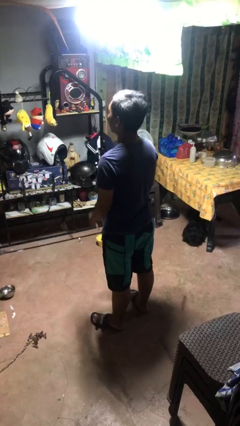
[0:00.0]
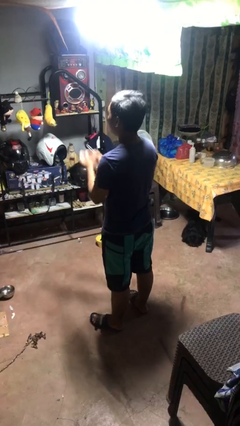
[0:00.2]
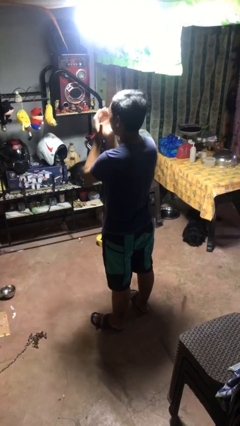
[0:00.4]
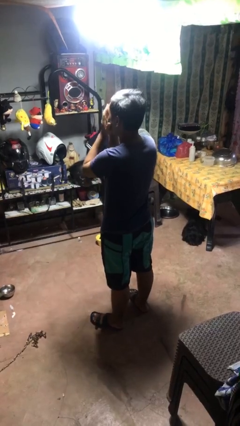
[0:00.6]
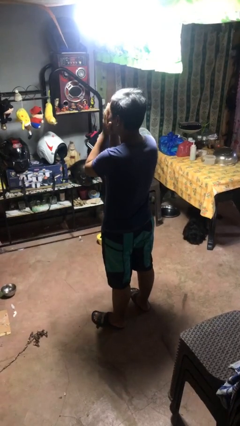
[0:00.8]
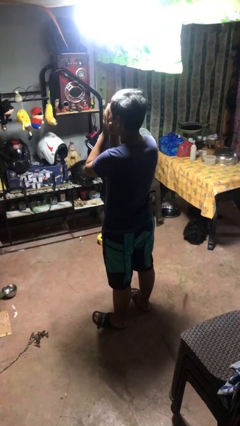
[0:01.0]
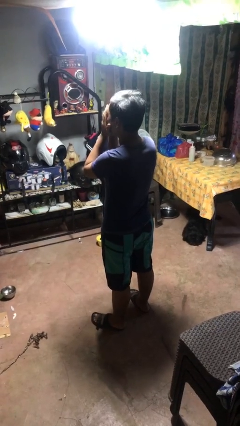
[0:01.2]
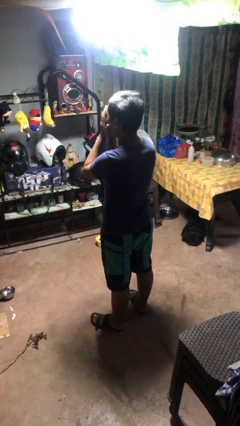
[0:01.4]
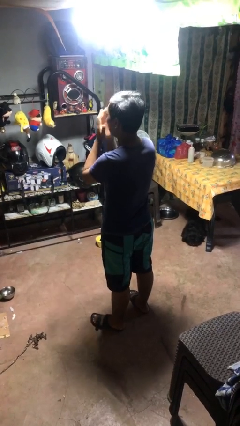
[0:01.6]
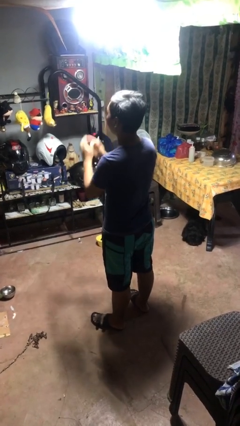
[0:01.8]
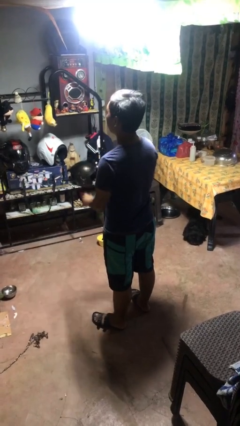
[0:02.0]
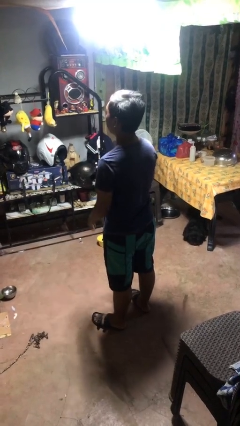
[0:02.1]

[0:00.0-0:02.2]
person covers face with hands

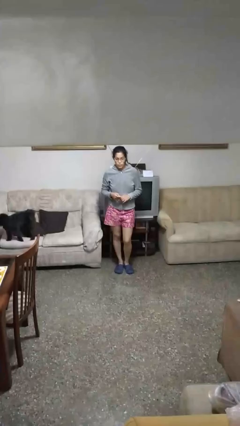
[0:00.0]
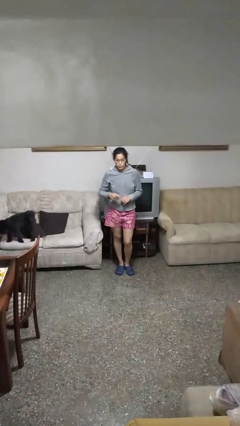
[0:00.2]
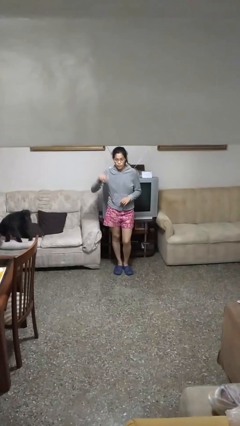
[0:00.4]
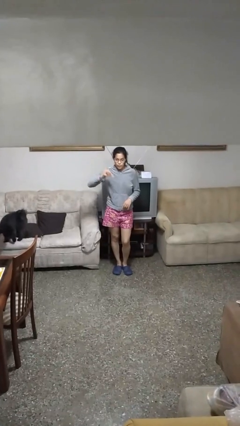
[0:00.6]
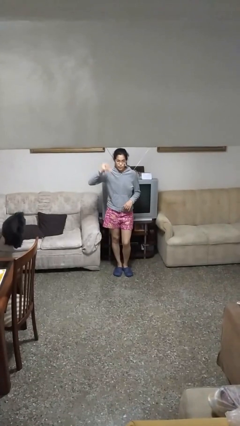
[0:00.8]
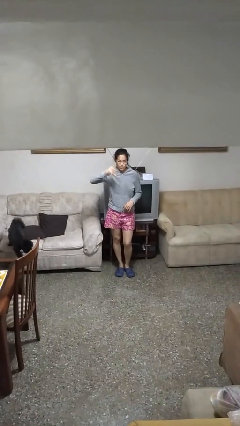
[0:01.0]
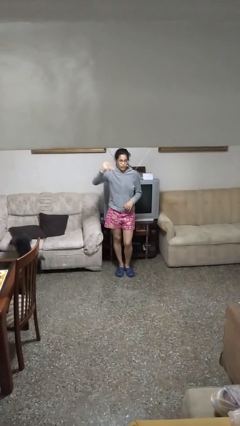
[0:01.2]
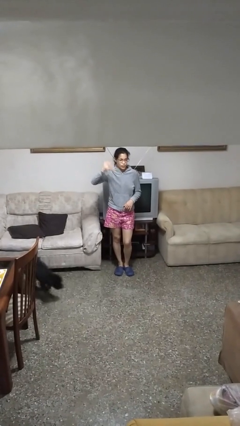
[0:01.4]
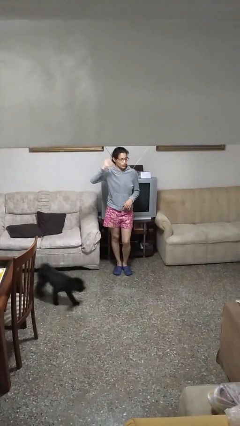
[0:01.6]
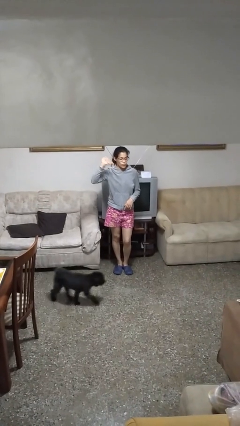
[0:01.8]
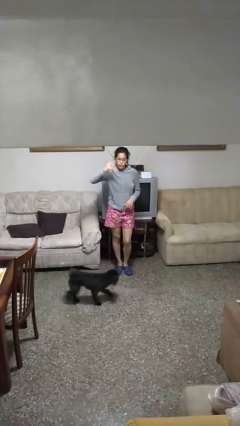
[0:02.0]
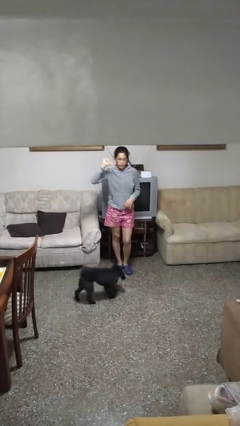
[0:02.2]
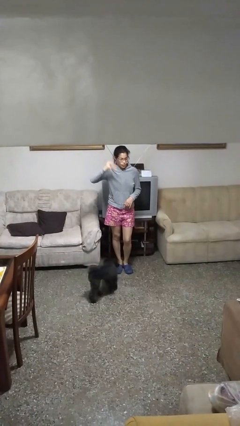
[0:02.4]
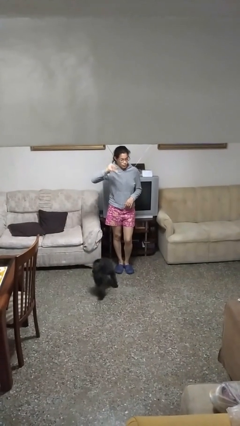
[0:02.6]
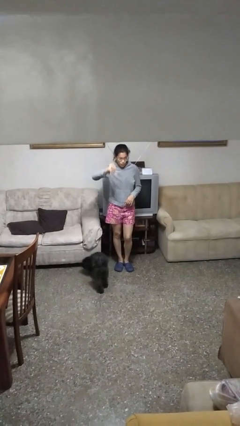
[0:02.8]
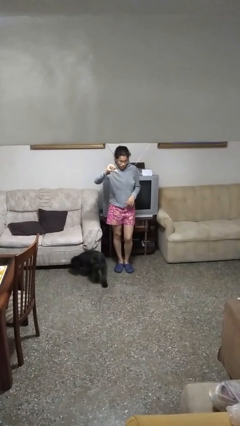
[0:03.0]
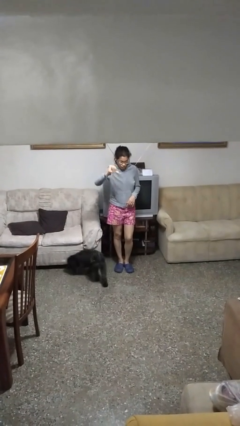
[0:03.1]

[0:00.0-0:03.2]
person gestures thumbs down

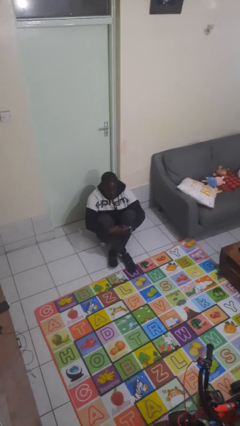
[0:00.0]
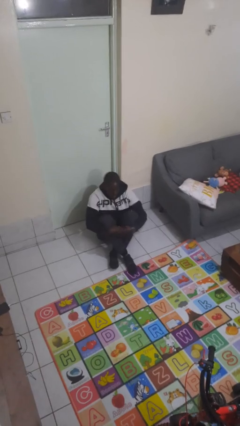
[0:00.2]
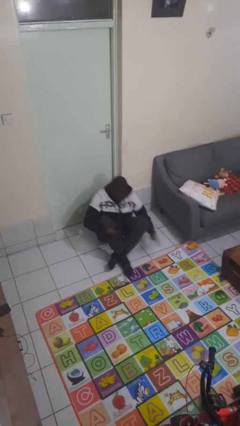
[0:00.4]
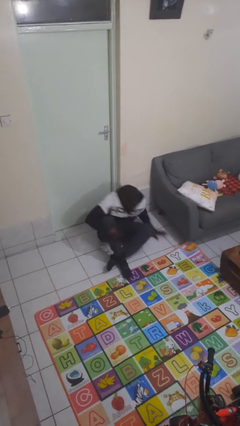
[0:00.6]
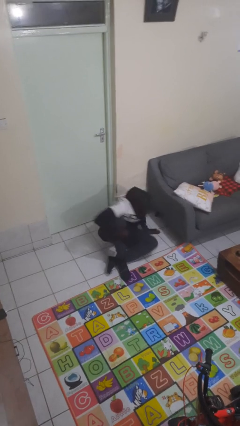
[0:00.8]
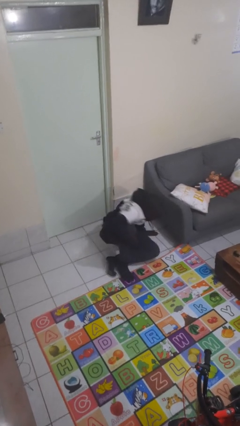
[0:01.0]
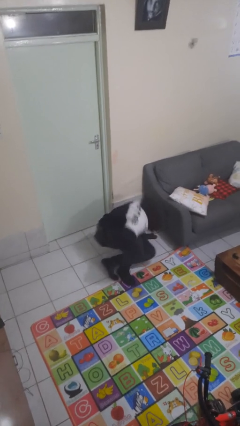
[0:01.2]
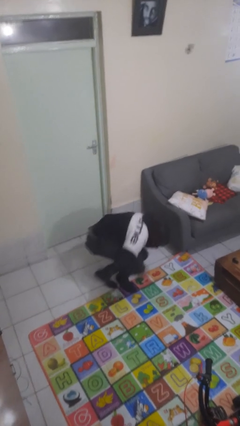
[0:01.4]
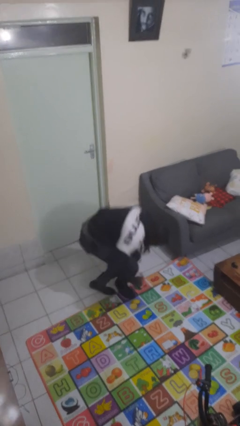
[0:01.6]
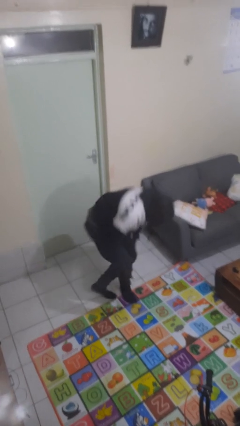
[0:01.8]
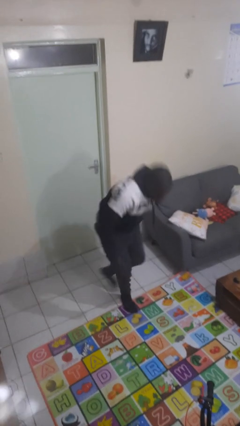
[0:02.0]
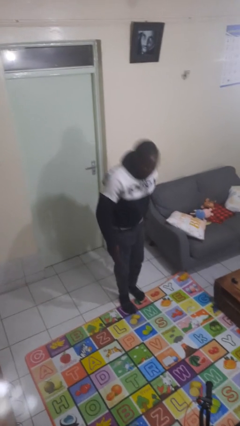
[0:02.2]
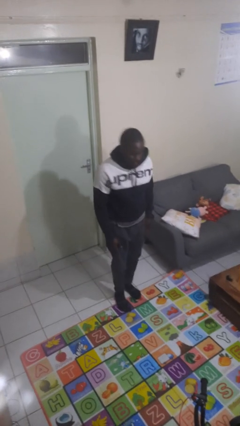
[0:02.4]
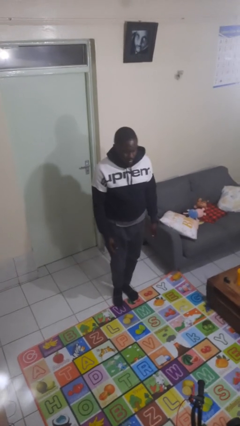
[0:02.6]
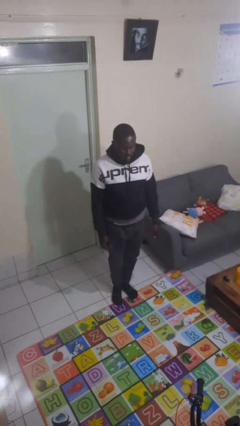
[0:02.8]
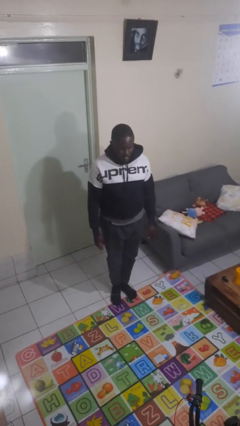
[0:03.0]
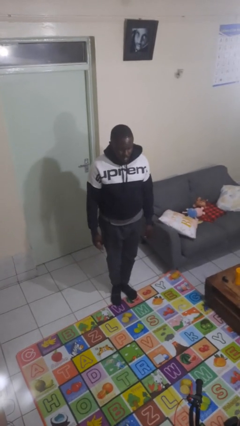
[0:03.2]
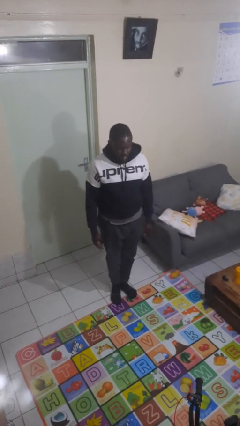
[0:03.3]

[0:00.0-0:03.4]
person stands up from floor

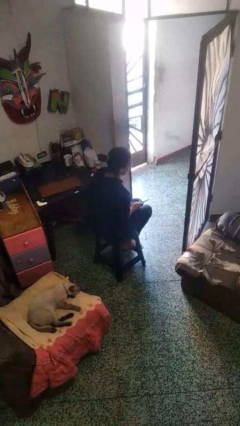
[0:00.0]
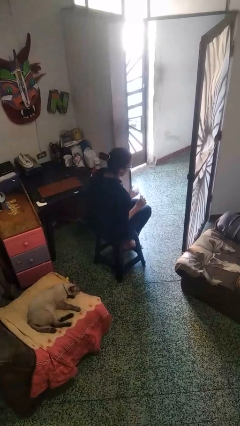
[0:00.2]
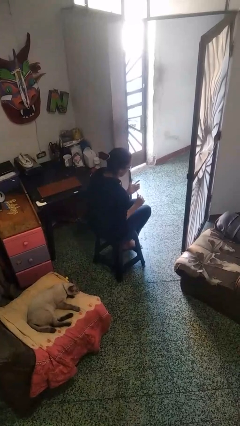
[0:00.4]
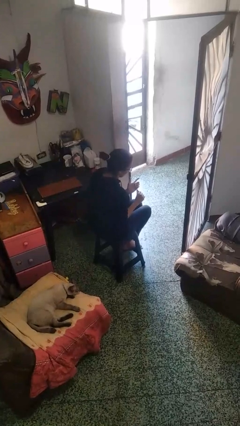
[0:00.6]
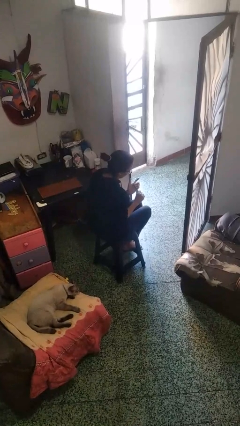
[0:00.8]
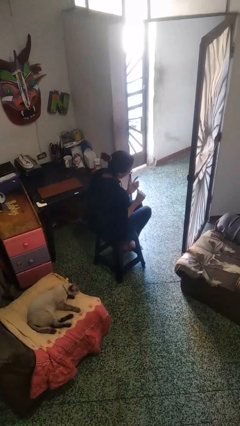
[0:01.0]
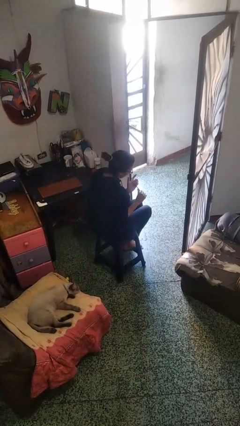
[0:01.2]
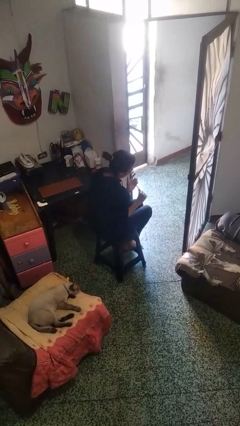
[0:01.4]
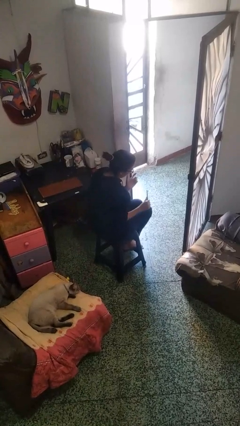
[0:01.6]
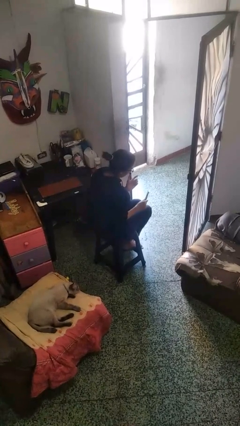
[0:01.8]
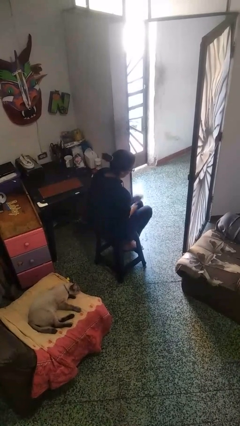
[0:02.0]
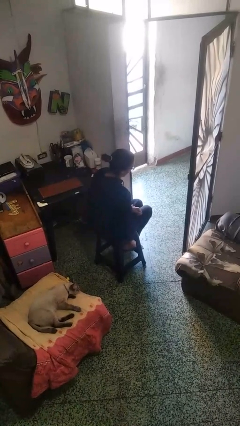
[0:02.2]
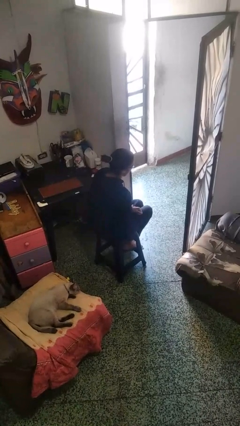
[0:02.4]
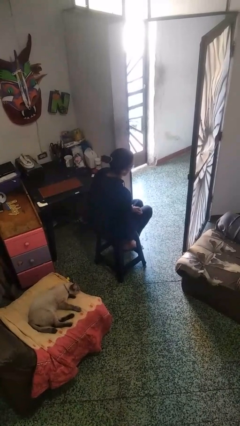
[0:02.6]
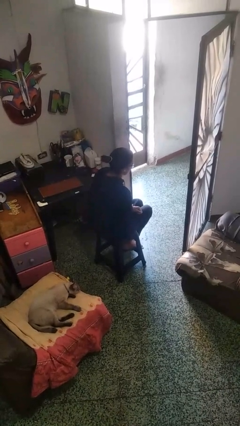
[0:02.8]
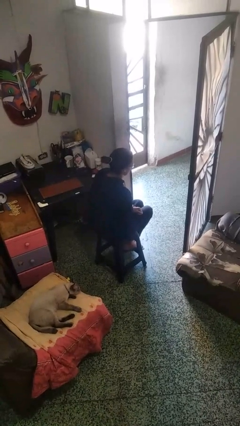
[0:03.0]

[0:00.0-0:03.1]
person files fingernails

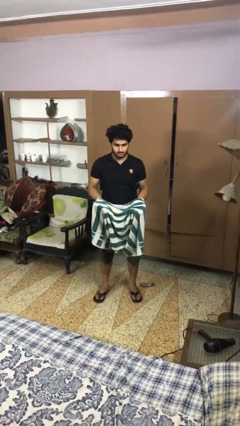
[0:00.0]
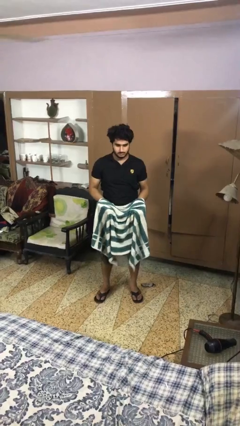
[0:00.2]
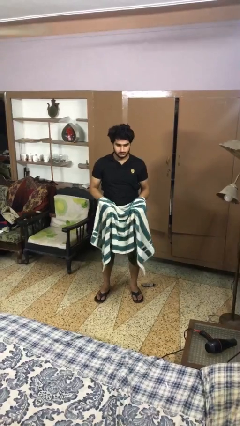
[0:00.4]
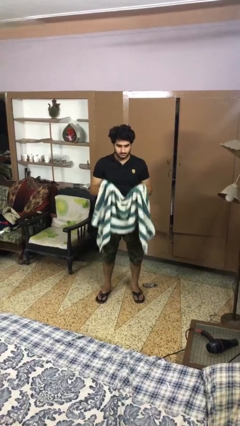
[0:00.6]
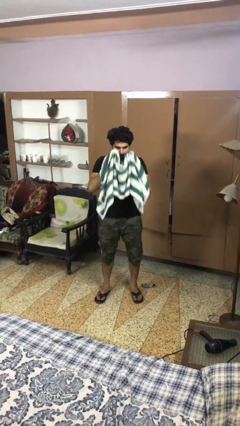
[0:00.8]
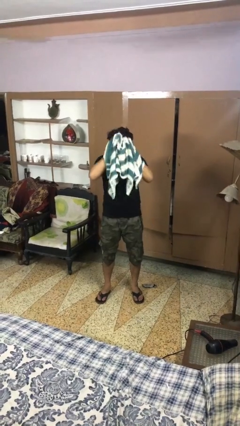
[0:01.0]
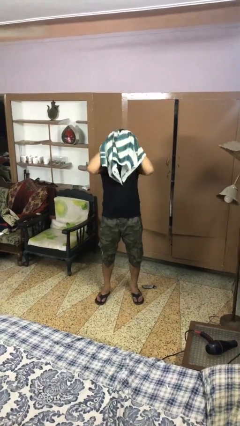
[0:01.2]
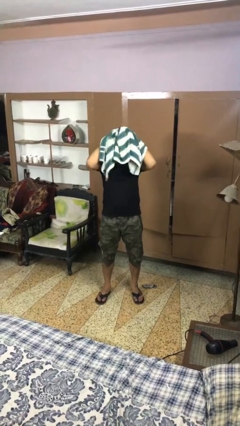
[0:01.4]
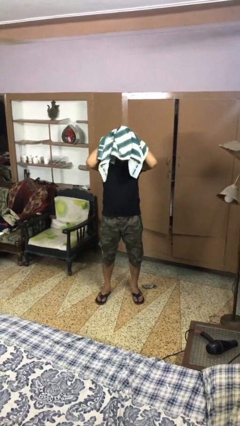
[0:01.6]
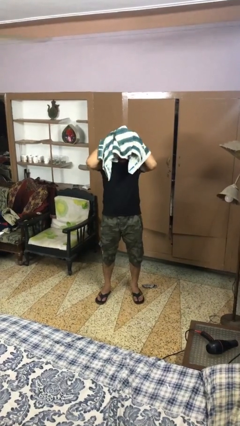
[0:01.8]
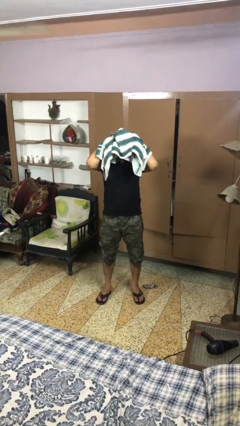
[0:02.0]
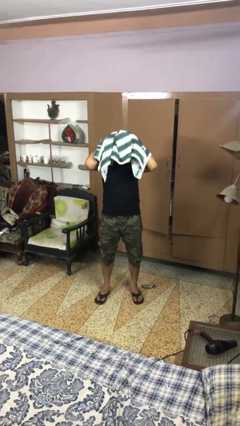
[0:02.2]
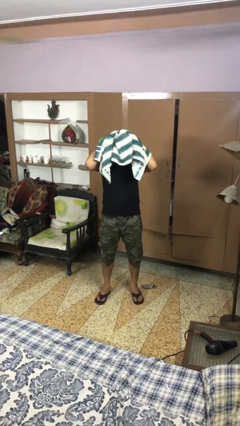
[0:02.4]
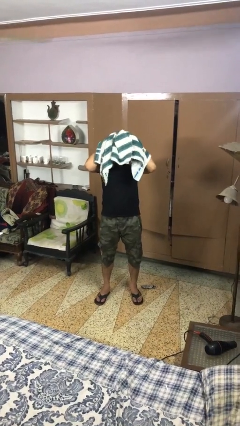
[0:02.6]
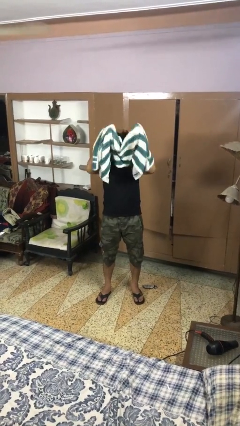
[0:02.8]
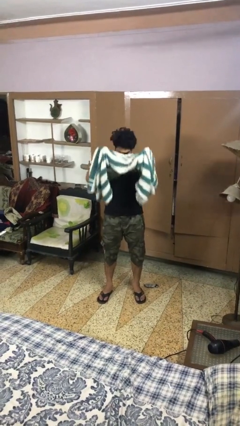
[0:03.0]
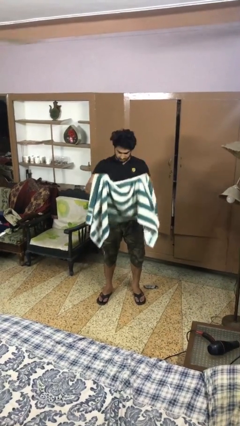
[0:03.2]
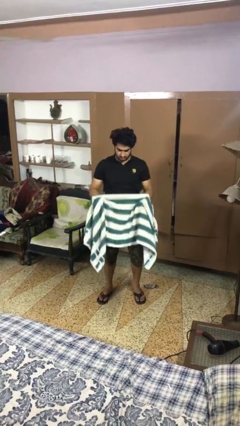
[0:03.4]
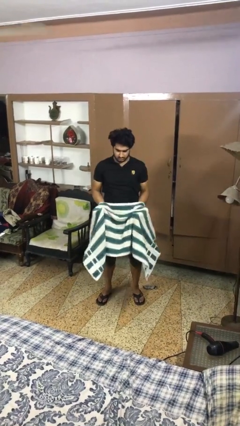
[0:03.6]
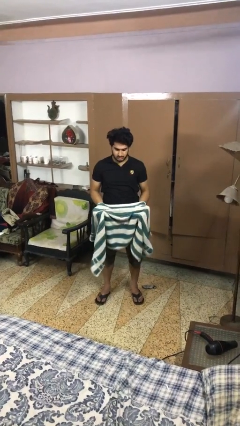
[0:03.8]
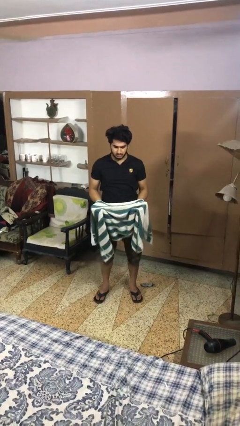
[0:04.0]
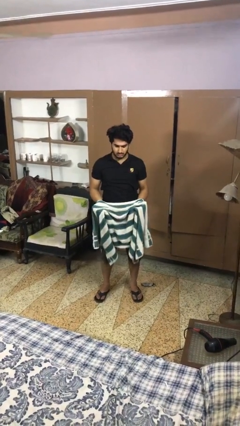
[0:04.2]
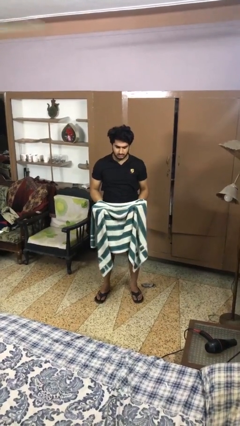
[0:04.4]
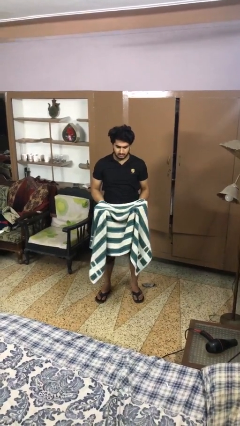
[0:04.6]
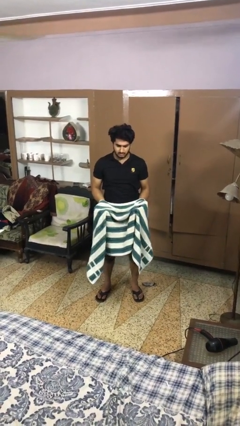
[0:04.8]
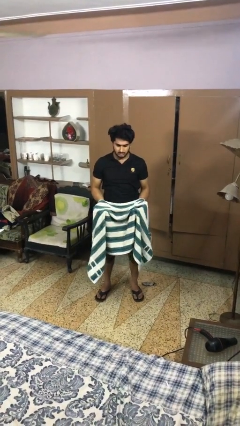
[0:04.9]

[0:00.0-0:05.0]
person dries hair with towel

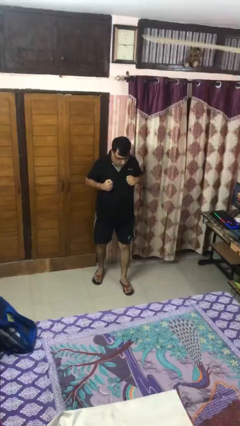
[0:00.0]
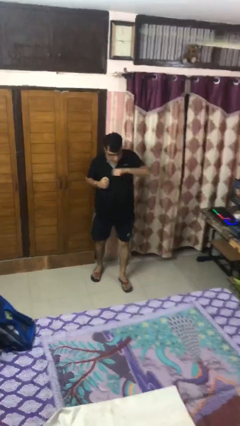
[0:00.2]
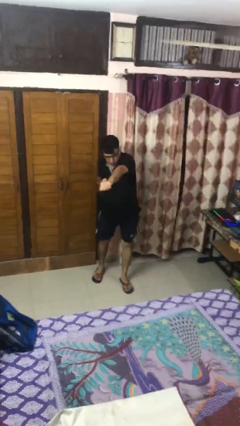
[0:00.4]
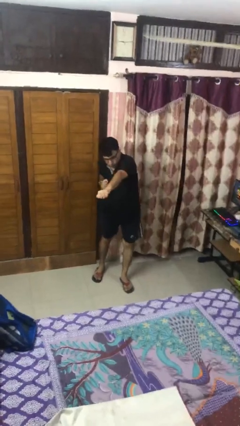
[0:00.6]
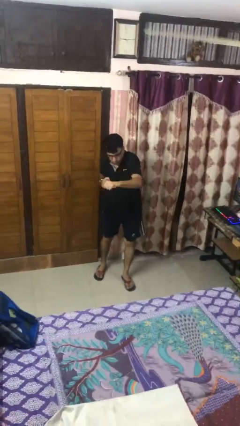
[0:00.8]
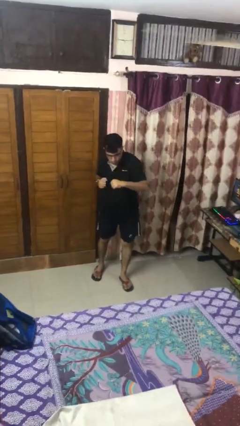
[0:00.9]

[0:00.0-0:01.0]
person punches
